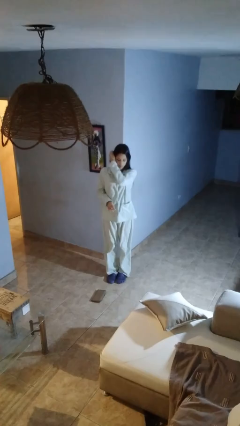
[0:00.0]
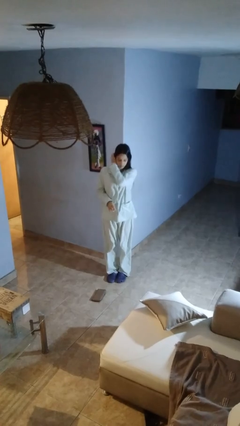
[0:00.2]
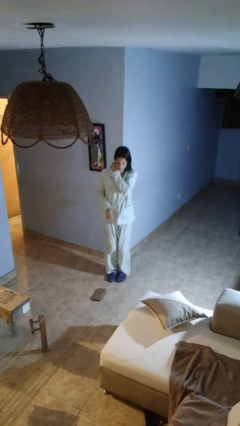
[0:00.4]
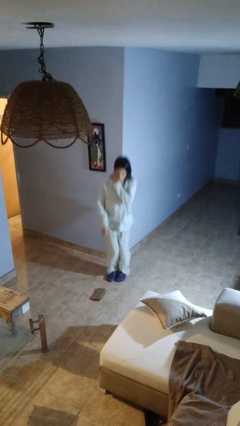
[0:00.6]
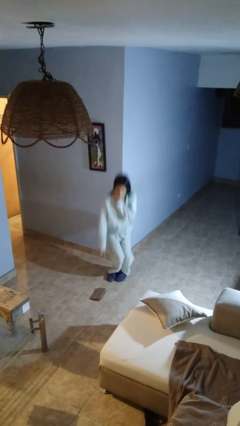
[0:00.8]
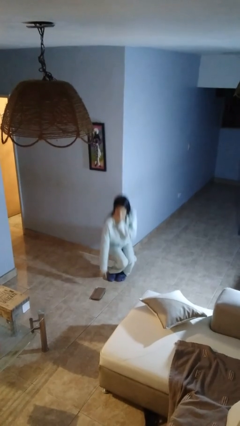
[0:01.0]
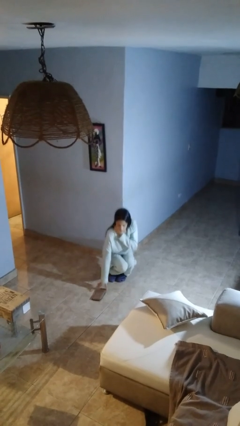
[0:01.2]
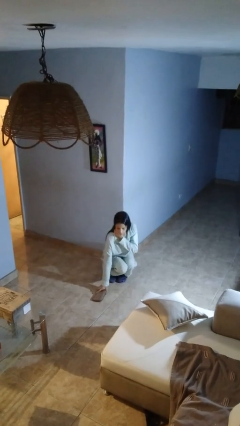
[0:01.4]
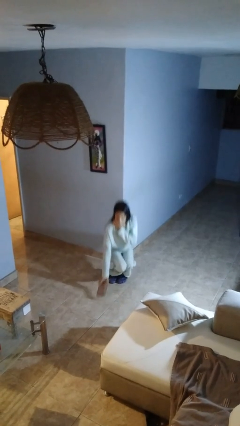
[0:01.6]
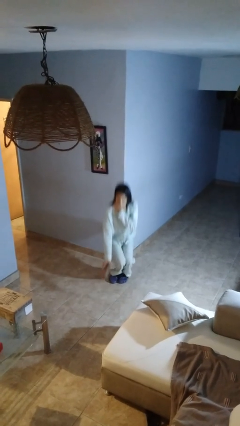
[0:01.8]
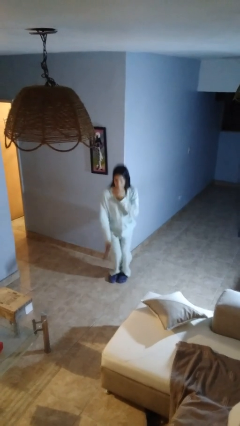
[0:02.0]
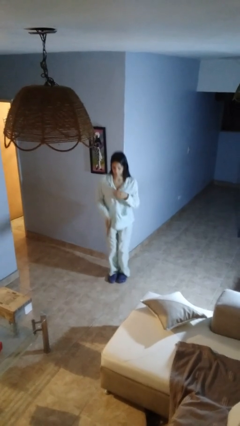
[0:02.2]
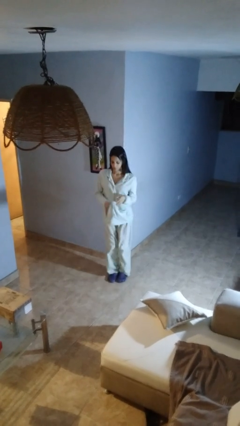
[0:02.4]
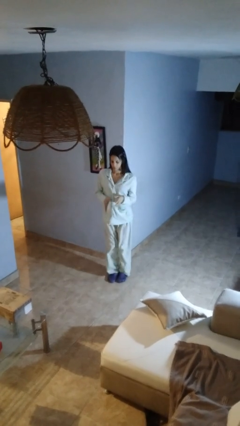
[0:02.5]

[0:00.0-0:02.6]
person picks up object from floor

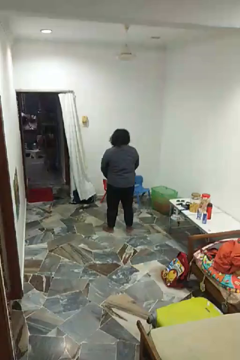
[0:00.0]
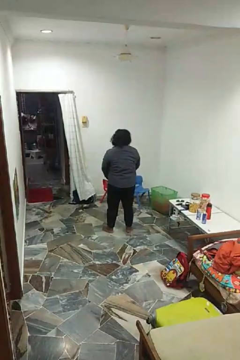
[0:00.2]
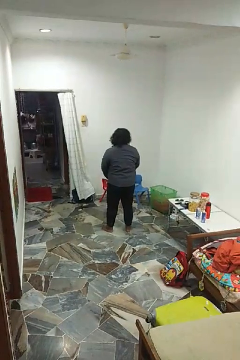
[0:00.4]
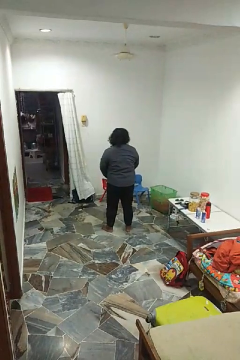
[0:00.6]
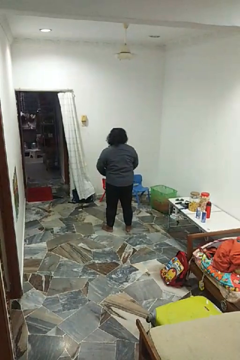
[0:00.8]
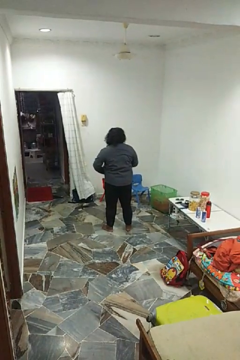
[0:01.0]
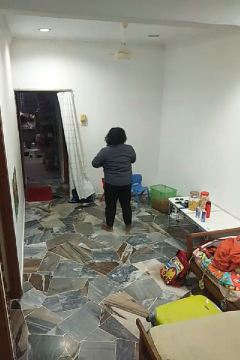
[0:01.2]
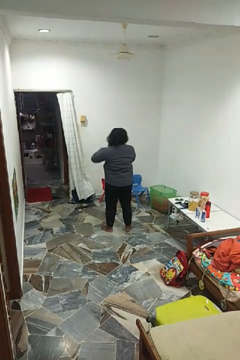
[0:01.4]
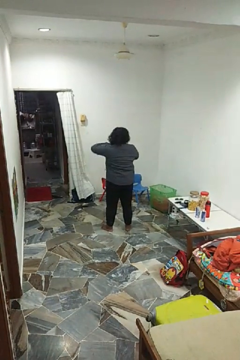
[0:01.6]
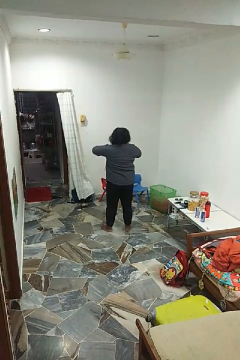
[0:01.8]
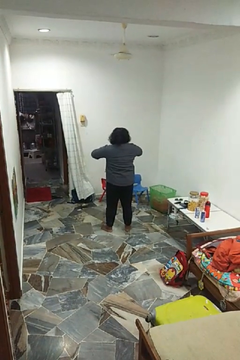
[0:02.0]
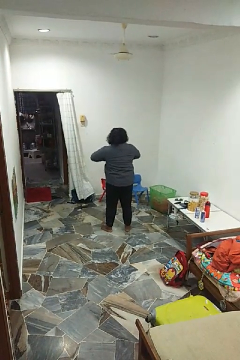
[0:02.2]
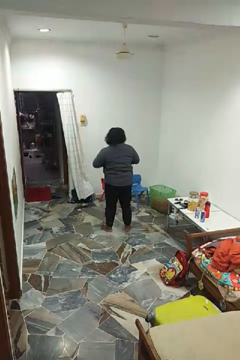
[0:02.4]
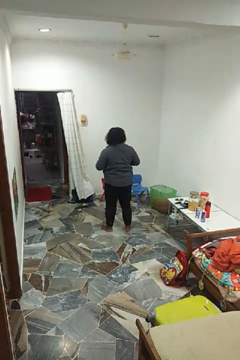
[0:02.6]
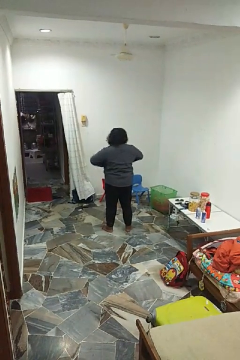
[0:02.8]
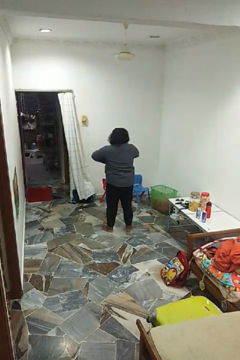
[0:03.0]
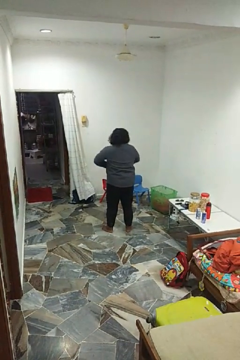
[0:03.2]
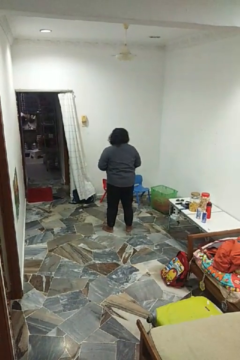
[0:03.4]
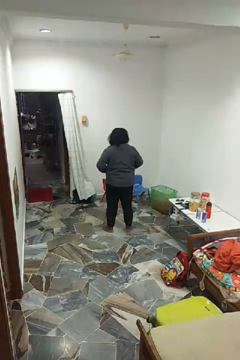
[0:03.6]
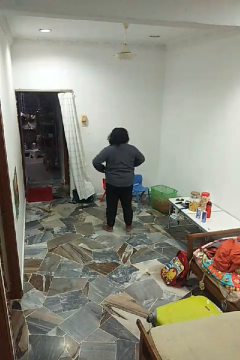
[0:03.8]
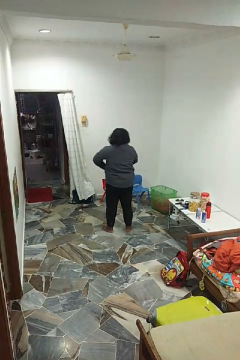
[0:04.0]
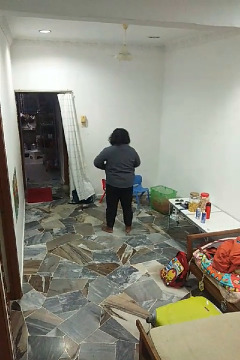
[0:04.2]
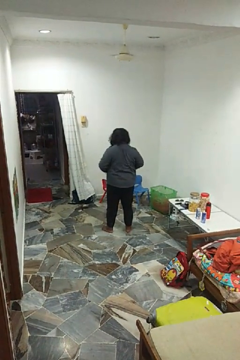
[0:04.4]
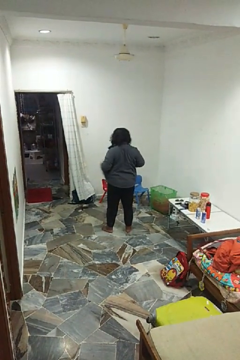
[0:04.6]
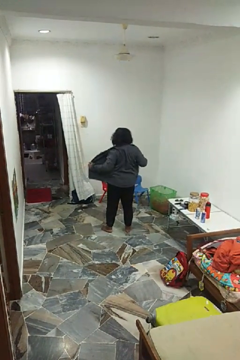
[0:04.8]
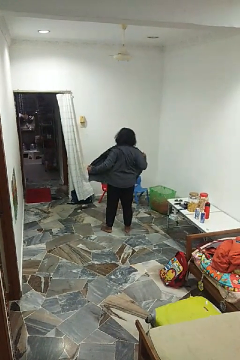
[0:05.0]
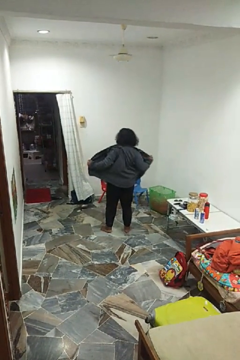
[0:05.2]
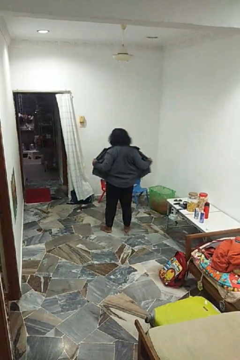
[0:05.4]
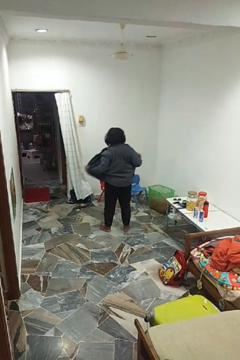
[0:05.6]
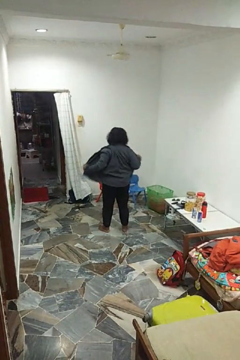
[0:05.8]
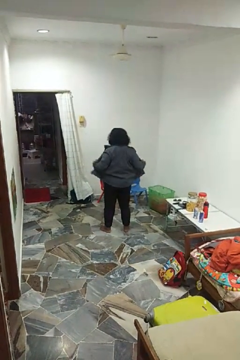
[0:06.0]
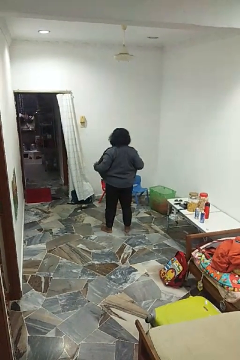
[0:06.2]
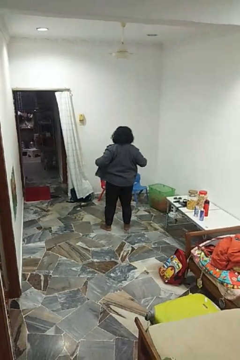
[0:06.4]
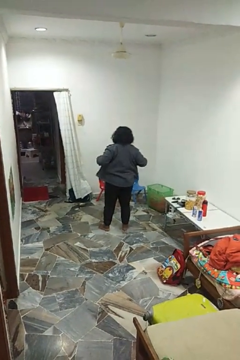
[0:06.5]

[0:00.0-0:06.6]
person unbuttons shirt

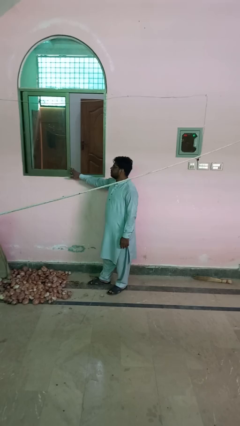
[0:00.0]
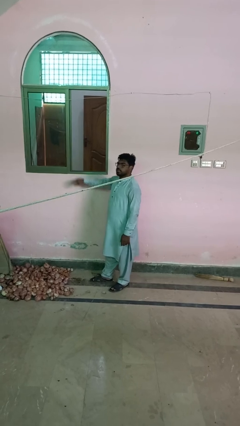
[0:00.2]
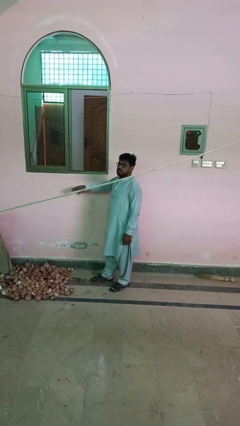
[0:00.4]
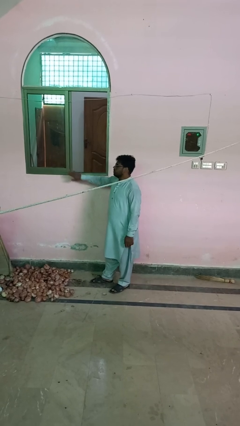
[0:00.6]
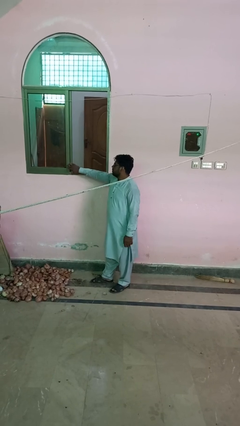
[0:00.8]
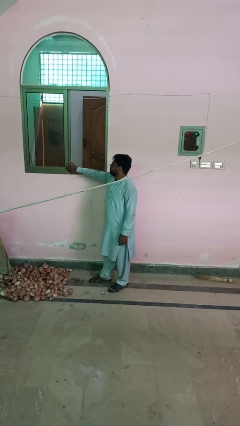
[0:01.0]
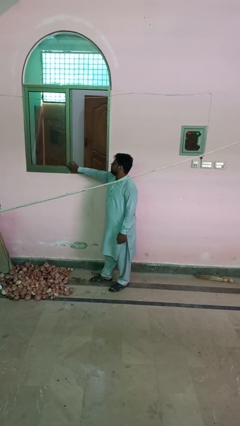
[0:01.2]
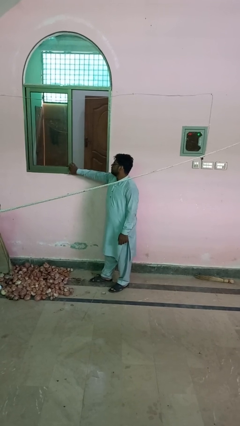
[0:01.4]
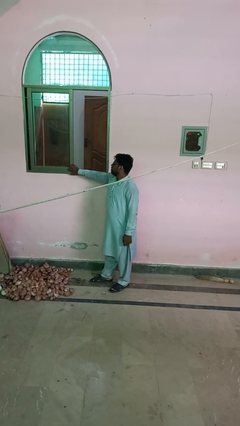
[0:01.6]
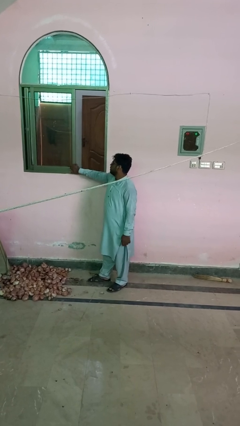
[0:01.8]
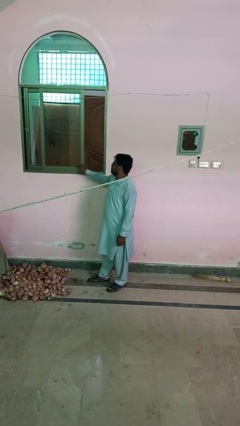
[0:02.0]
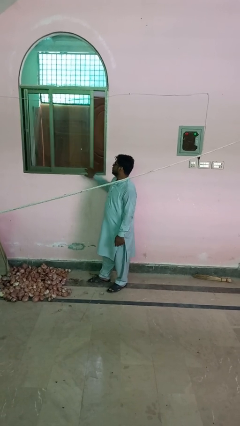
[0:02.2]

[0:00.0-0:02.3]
person closes sliding door

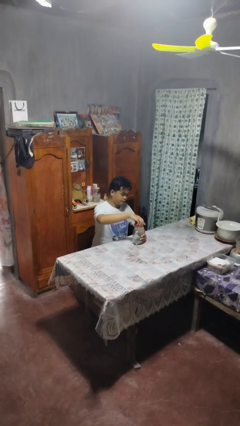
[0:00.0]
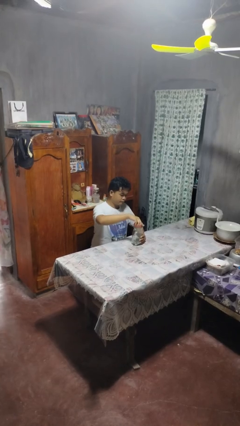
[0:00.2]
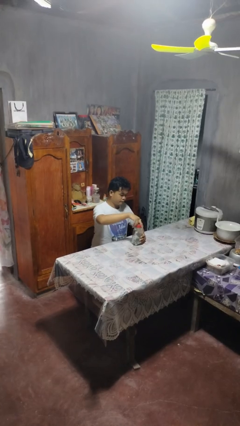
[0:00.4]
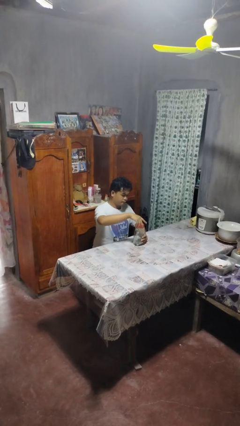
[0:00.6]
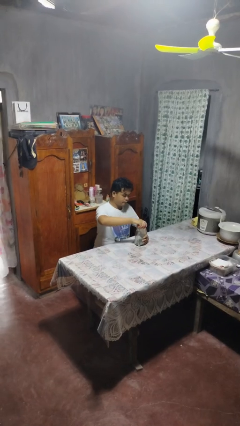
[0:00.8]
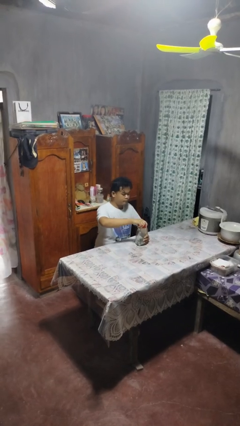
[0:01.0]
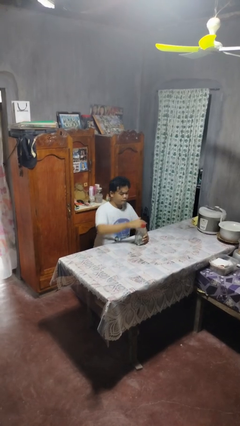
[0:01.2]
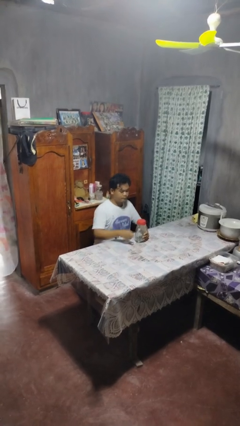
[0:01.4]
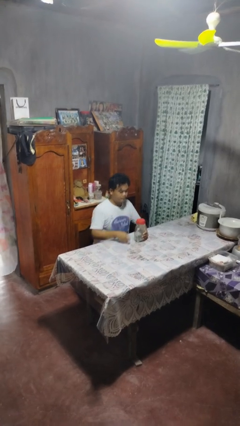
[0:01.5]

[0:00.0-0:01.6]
person closes jar

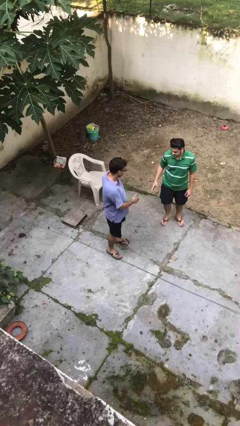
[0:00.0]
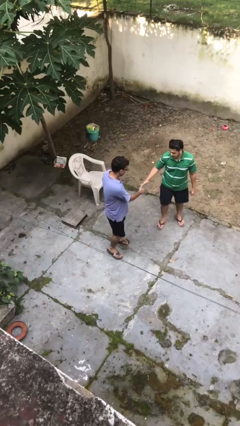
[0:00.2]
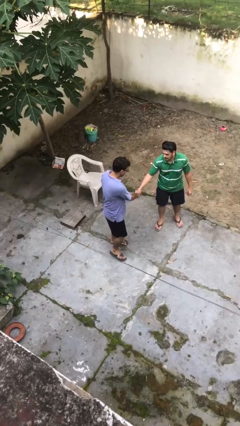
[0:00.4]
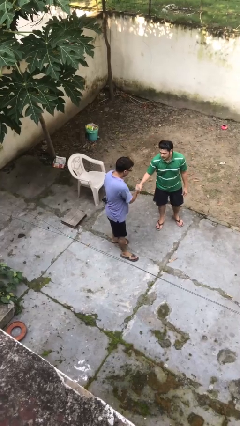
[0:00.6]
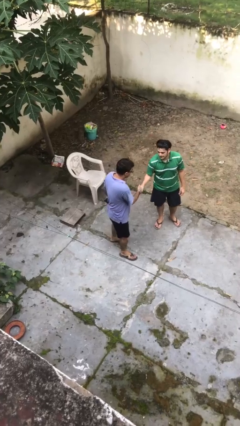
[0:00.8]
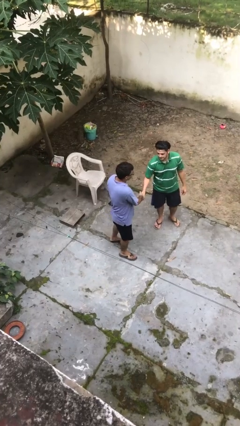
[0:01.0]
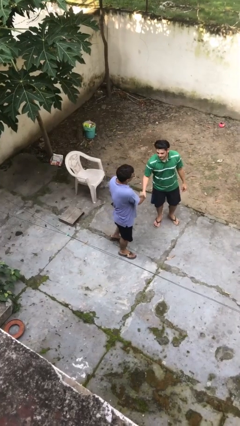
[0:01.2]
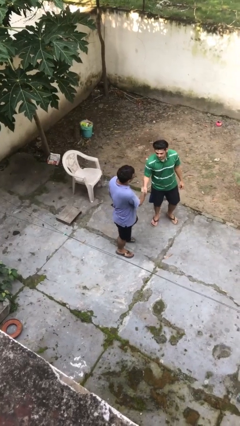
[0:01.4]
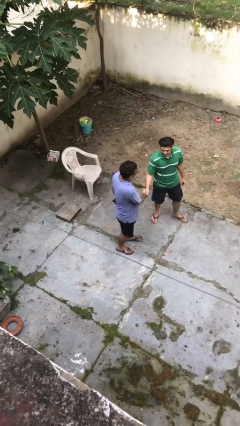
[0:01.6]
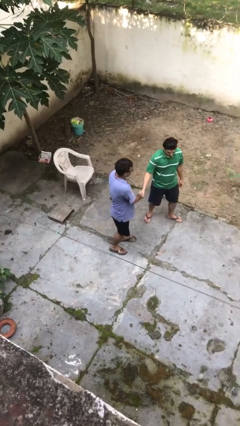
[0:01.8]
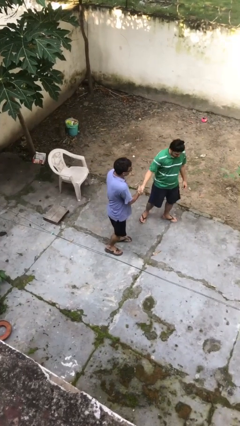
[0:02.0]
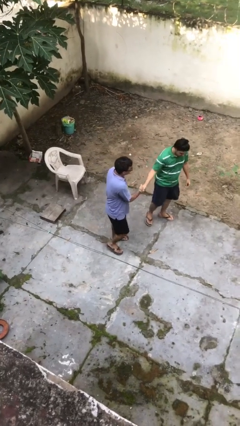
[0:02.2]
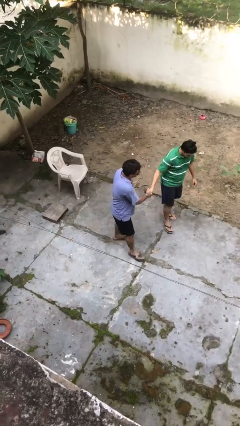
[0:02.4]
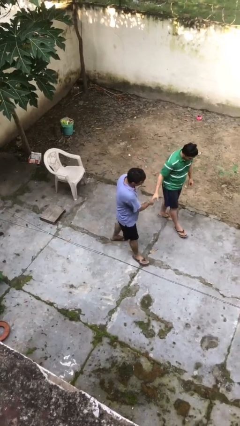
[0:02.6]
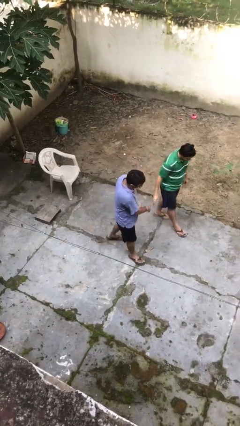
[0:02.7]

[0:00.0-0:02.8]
person shakes hand

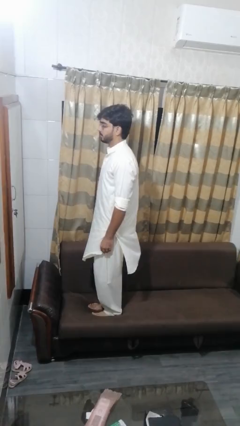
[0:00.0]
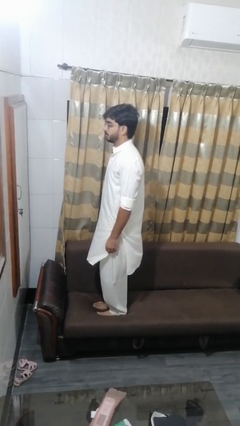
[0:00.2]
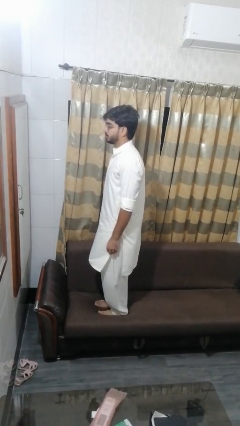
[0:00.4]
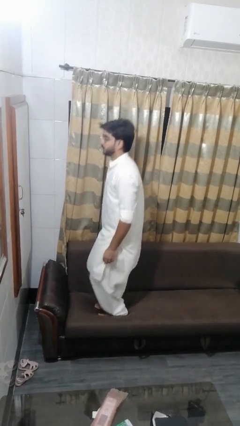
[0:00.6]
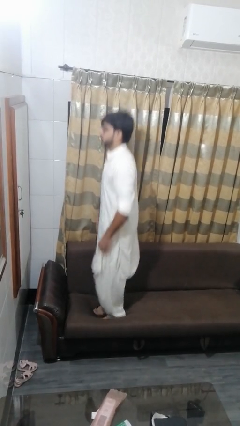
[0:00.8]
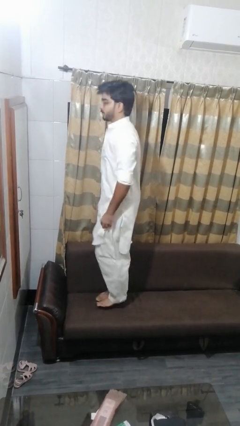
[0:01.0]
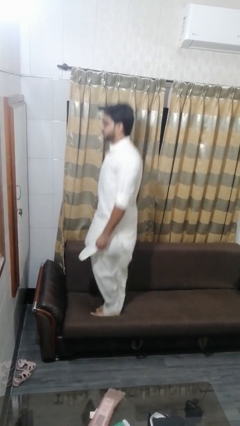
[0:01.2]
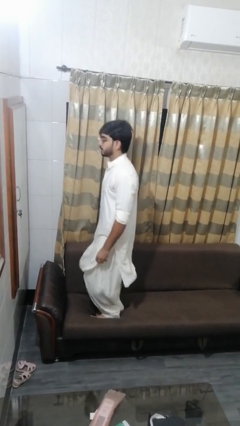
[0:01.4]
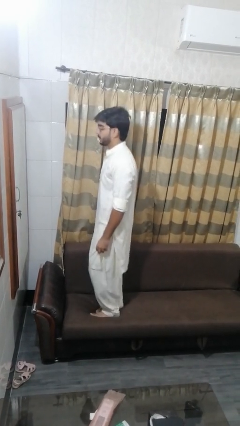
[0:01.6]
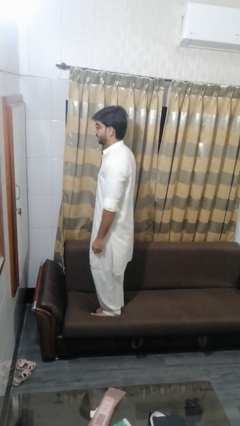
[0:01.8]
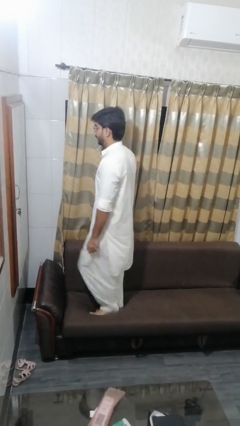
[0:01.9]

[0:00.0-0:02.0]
person jumps on couch

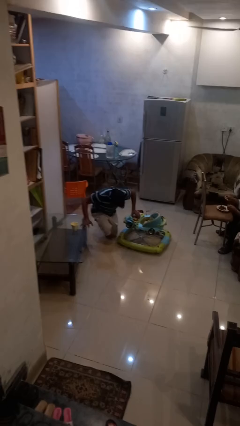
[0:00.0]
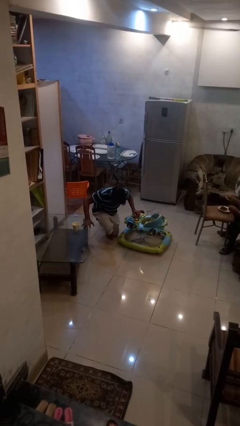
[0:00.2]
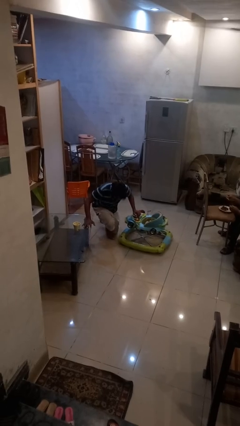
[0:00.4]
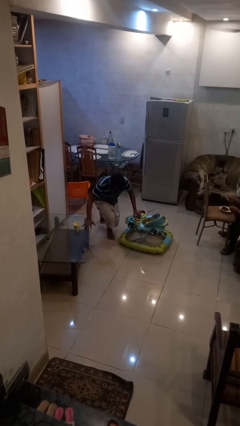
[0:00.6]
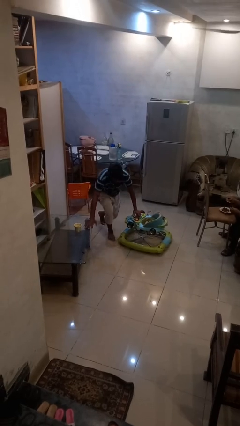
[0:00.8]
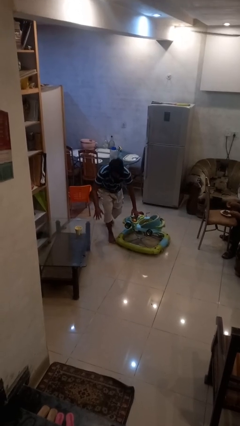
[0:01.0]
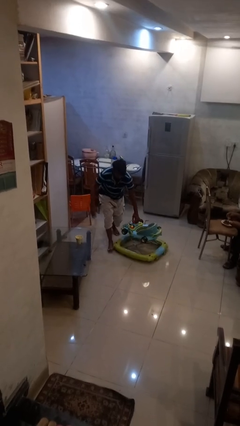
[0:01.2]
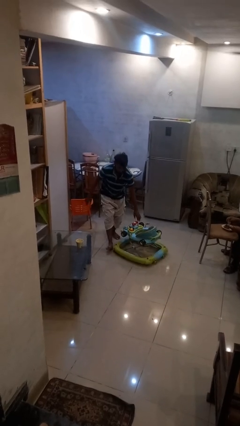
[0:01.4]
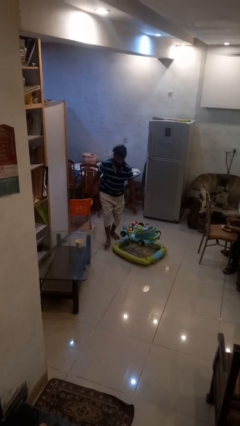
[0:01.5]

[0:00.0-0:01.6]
person stands up from floor
